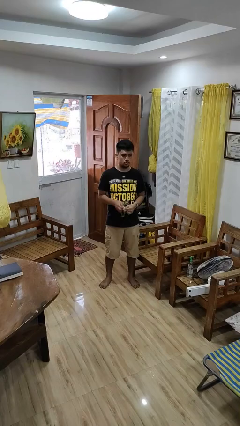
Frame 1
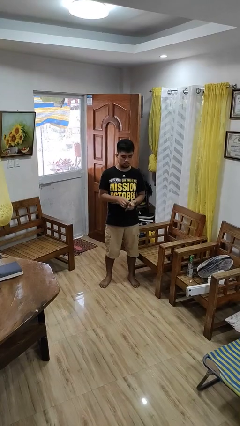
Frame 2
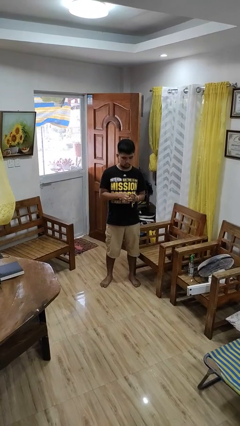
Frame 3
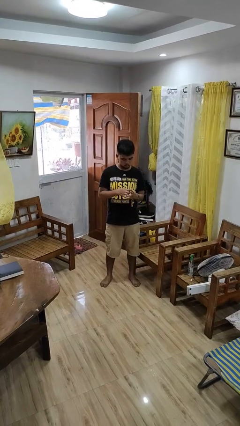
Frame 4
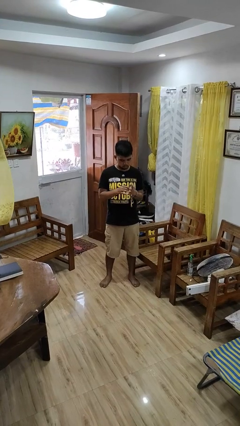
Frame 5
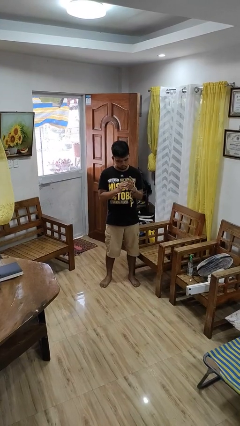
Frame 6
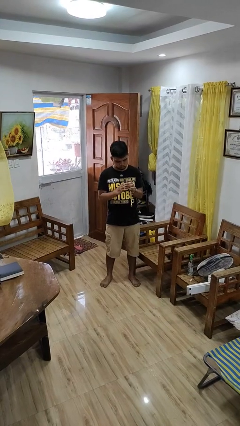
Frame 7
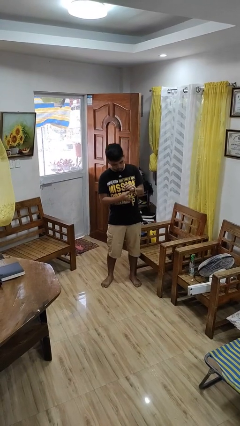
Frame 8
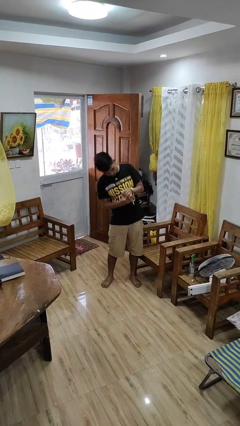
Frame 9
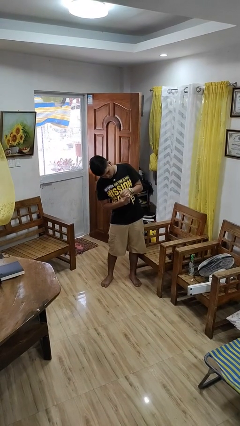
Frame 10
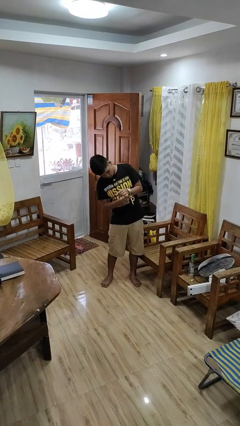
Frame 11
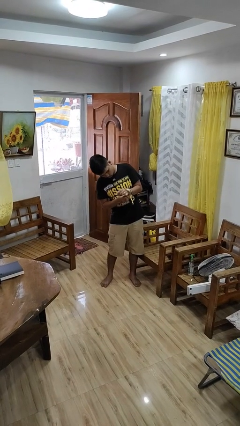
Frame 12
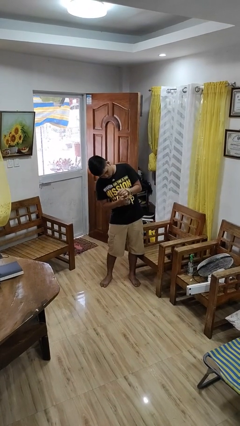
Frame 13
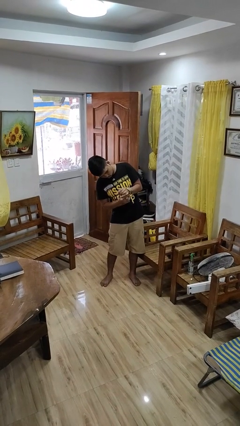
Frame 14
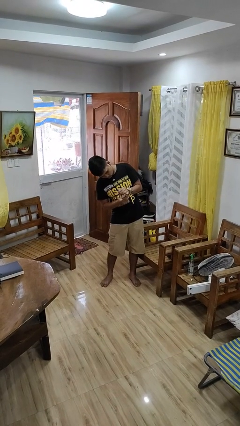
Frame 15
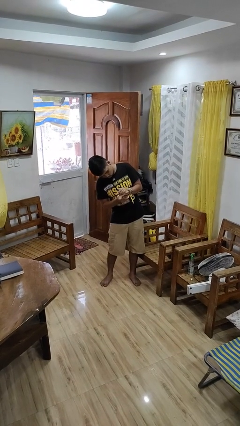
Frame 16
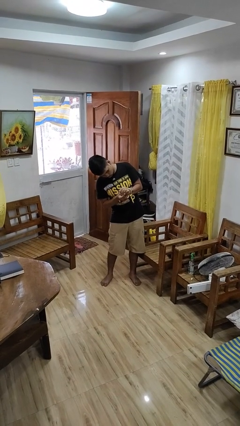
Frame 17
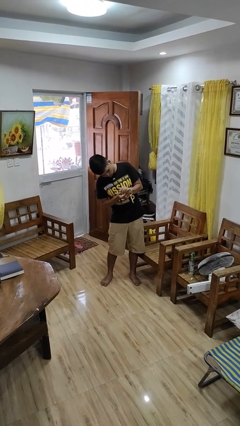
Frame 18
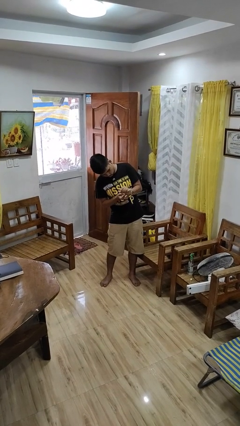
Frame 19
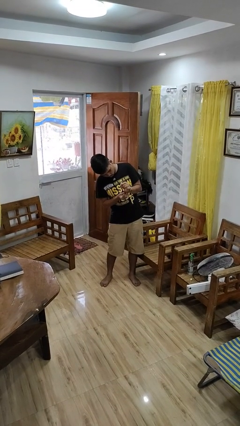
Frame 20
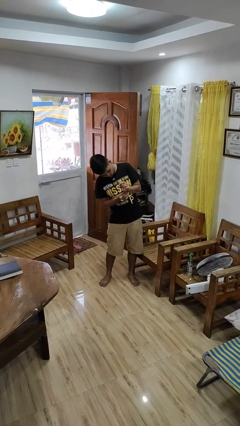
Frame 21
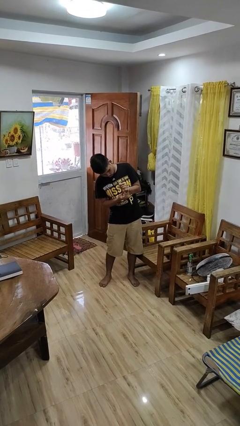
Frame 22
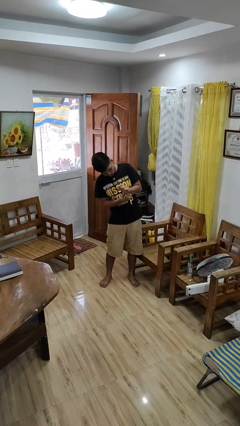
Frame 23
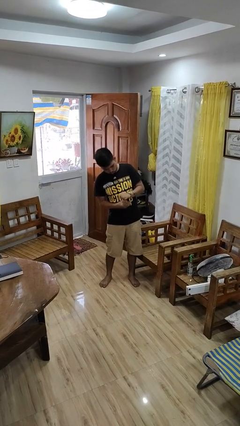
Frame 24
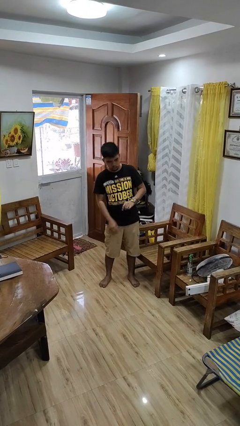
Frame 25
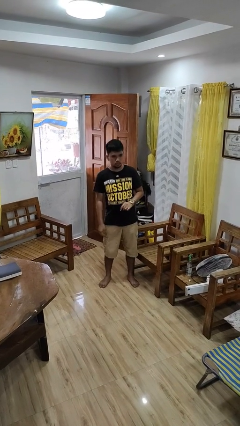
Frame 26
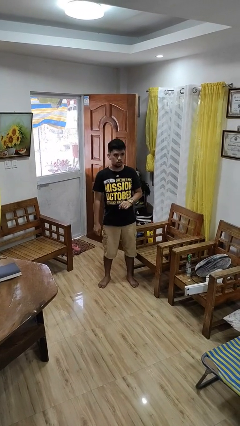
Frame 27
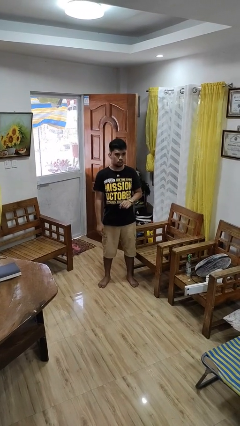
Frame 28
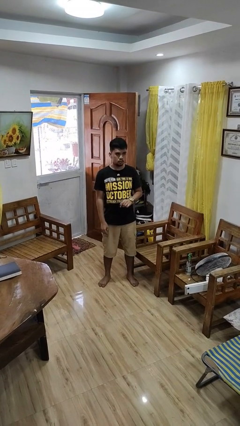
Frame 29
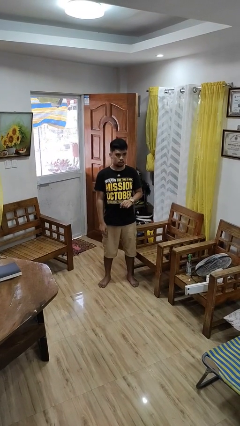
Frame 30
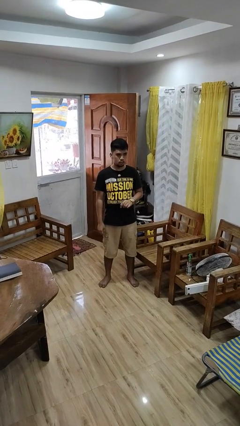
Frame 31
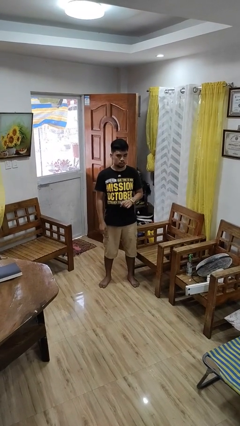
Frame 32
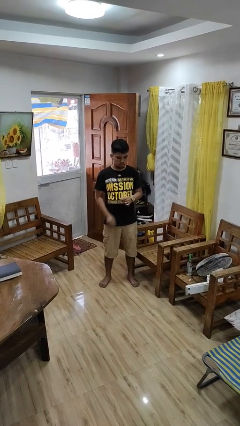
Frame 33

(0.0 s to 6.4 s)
person puts on wristwatch

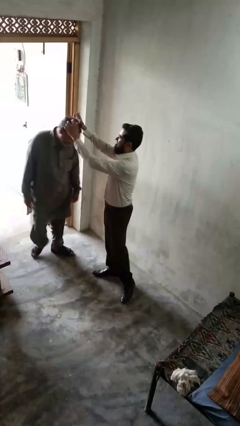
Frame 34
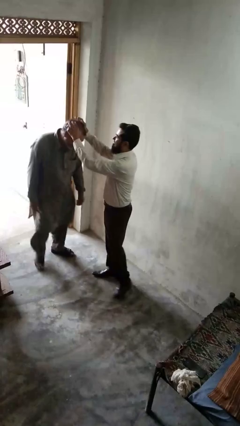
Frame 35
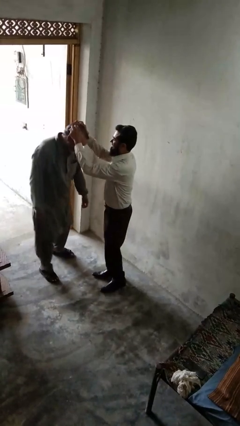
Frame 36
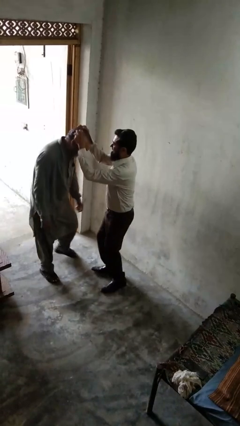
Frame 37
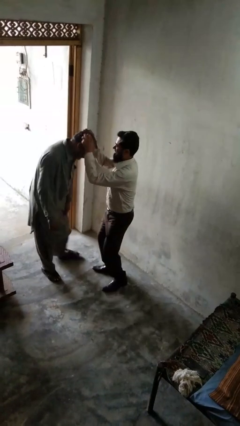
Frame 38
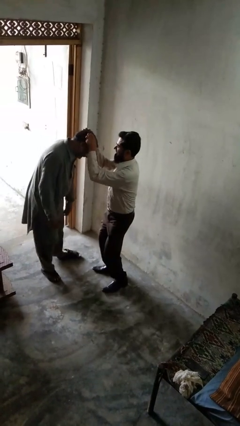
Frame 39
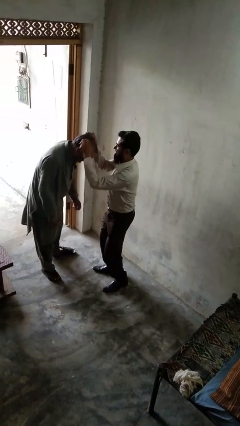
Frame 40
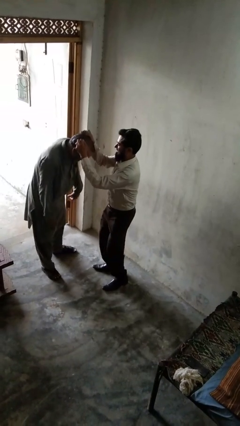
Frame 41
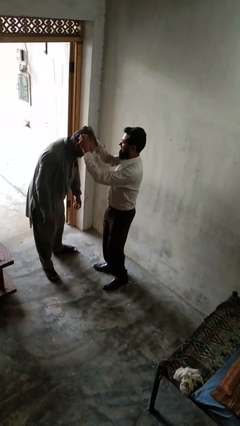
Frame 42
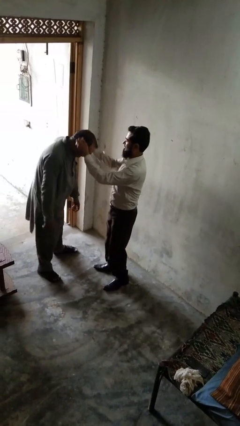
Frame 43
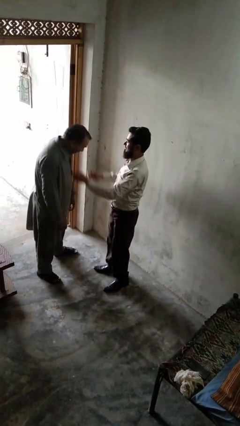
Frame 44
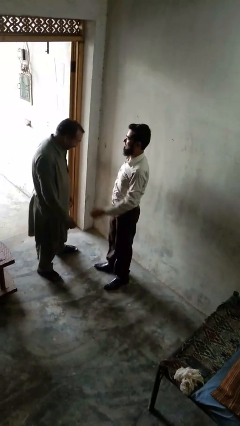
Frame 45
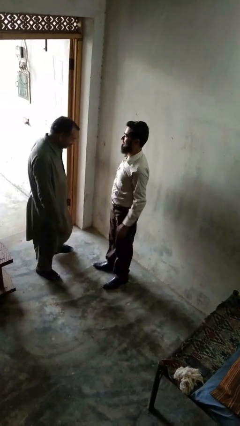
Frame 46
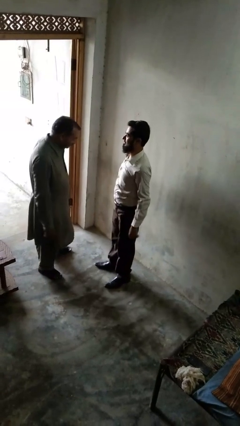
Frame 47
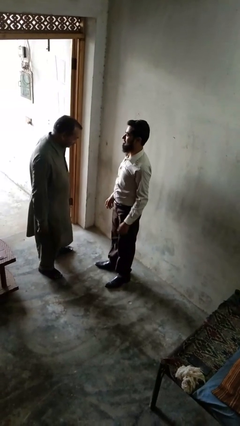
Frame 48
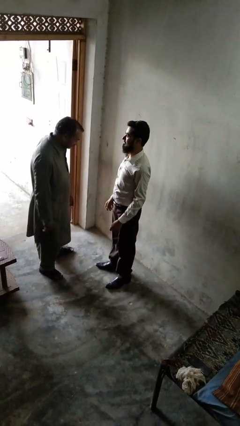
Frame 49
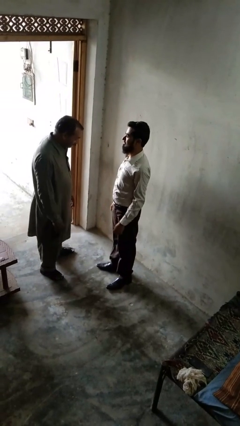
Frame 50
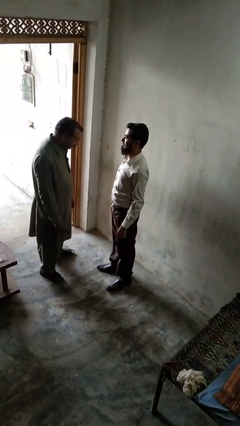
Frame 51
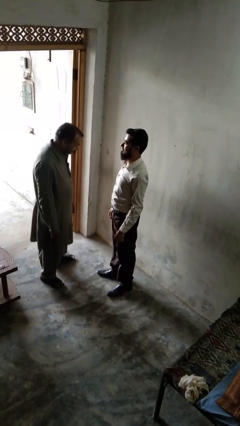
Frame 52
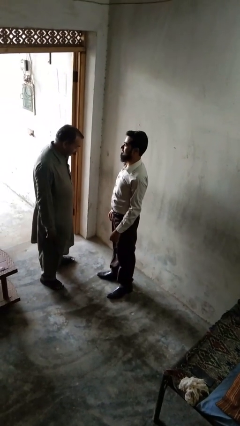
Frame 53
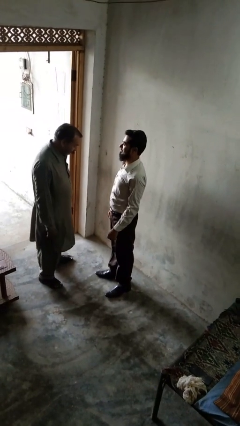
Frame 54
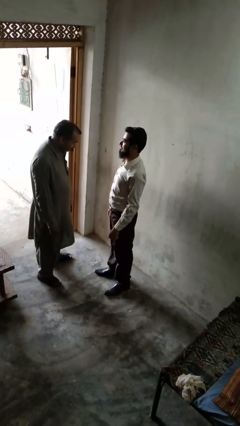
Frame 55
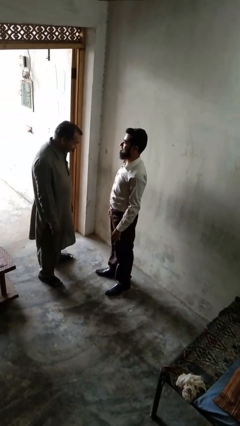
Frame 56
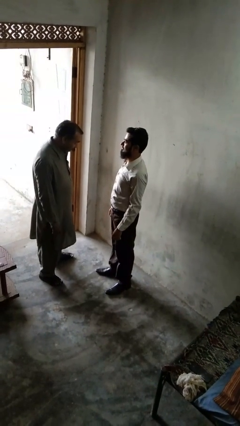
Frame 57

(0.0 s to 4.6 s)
person grabs person by hair

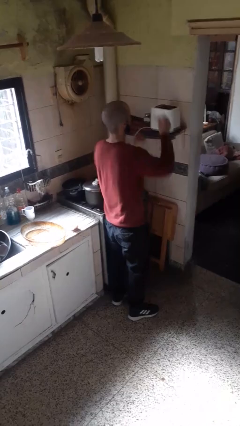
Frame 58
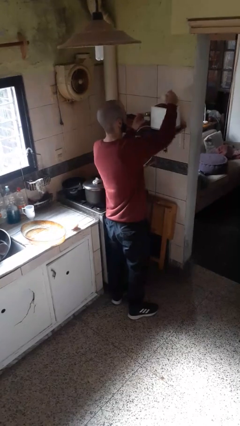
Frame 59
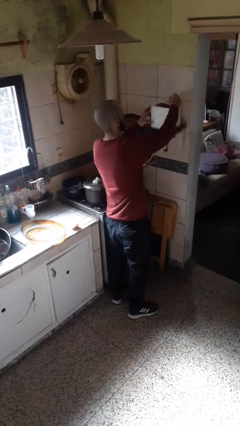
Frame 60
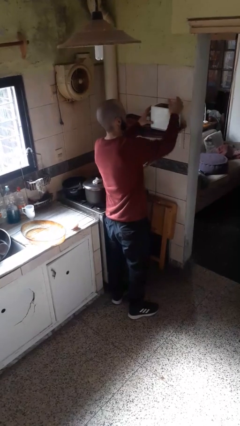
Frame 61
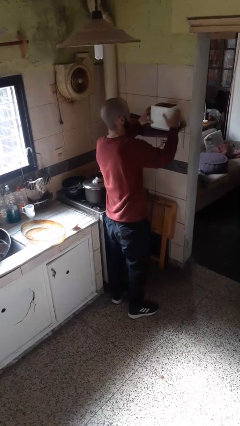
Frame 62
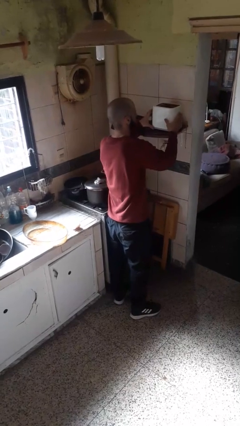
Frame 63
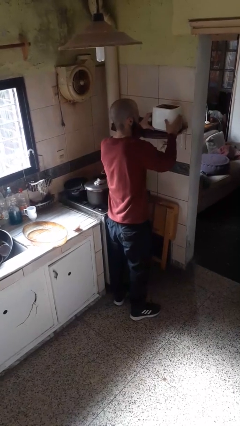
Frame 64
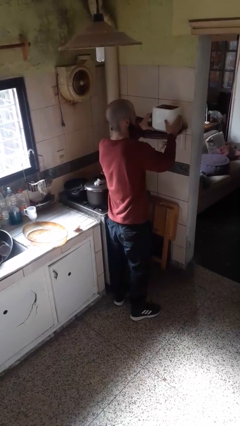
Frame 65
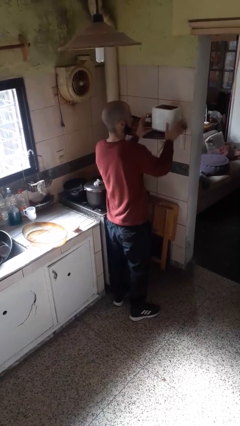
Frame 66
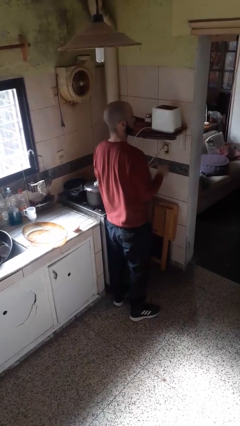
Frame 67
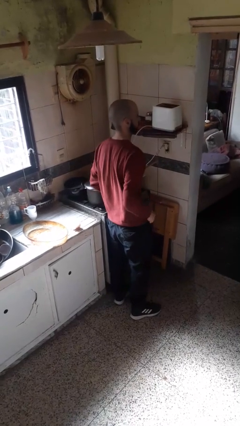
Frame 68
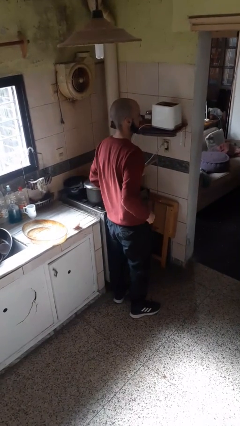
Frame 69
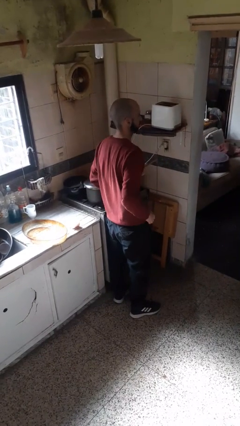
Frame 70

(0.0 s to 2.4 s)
person puts object into toaster

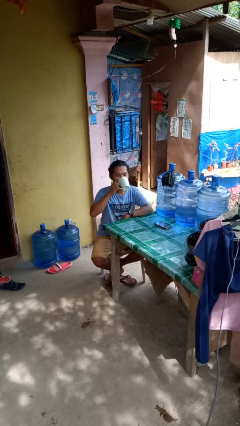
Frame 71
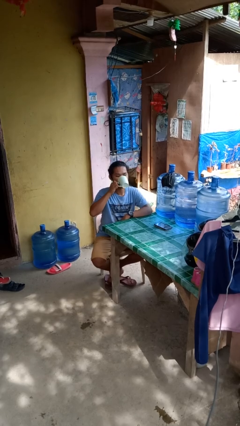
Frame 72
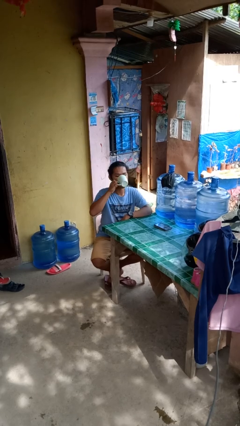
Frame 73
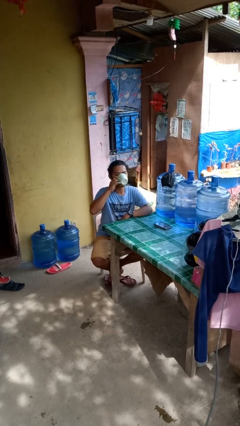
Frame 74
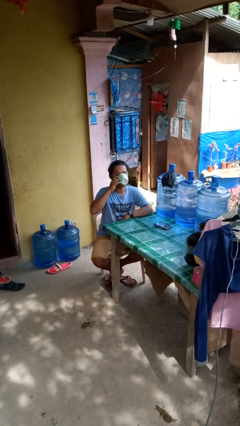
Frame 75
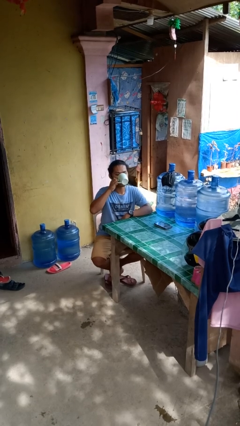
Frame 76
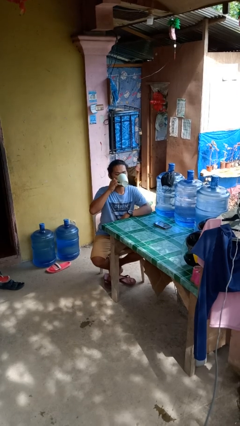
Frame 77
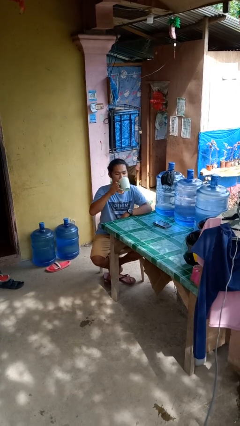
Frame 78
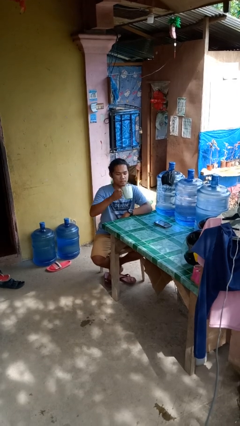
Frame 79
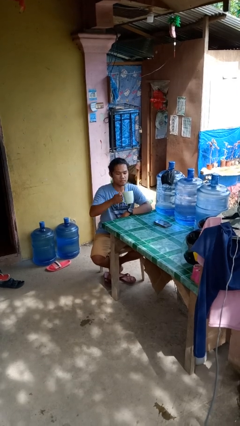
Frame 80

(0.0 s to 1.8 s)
person drinks from mug

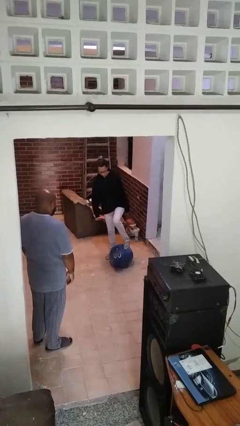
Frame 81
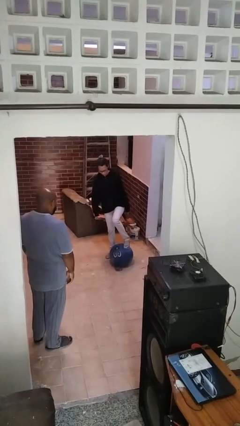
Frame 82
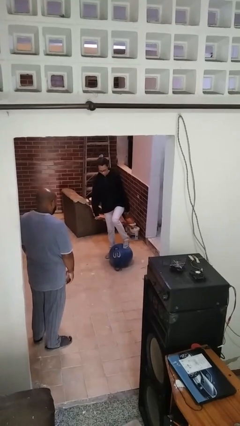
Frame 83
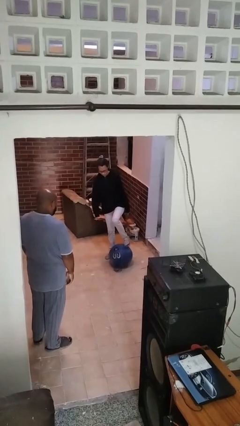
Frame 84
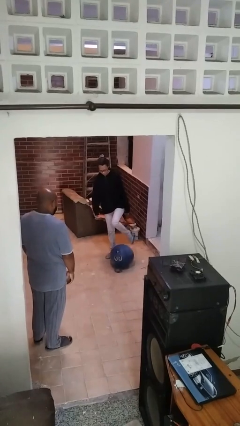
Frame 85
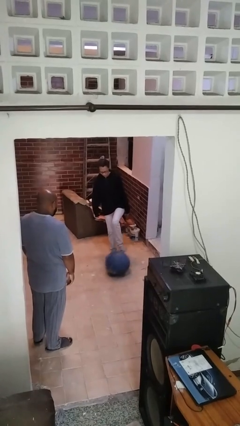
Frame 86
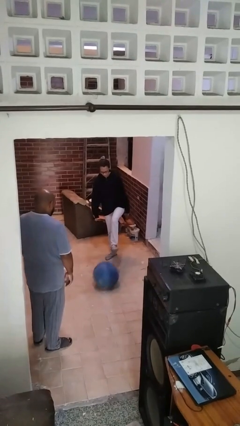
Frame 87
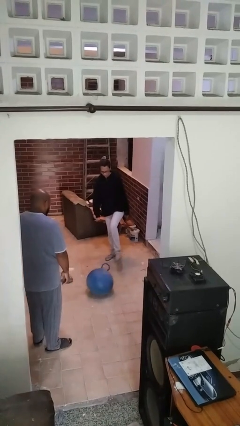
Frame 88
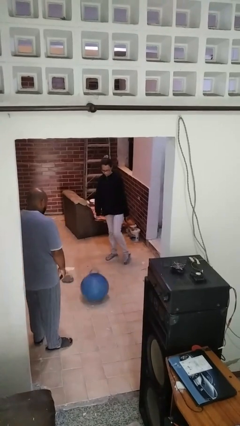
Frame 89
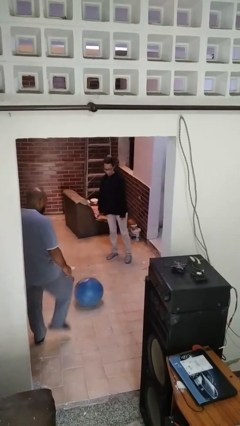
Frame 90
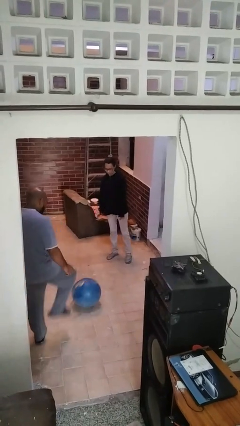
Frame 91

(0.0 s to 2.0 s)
person kicks object to person
